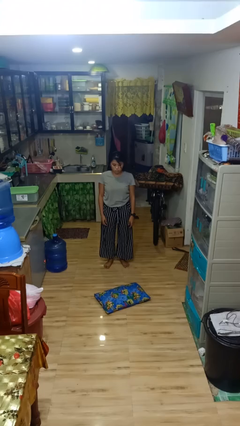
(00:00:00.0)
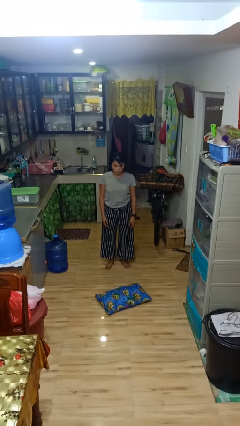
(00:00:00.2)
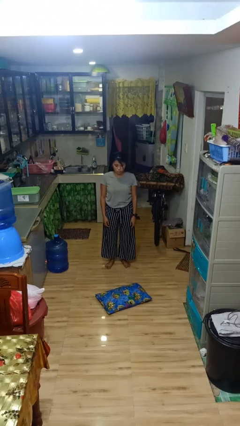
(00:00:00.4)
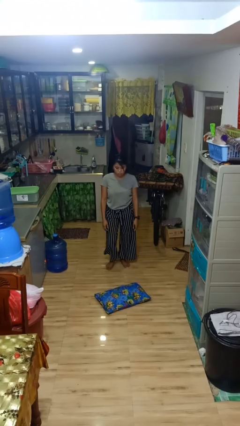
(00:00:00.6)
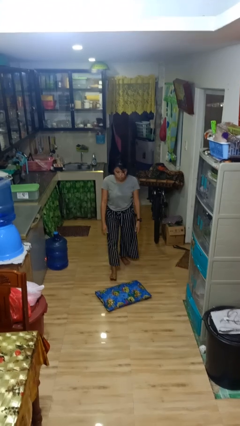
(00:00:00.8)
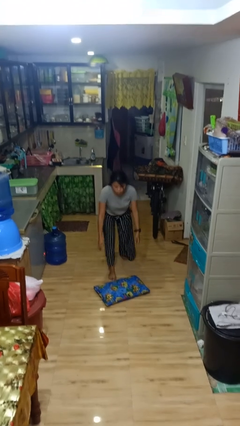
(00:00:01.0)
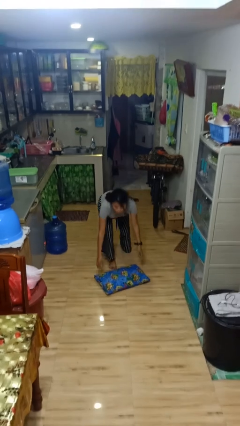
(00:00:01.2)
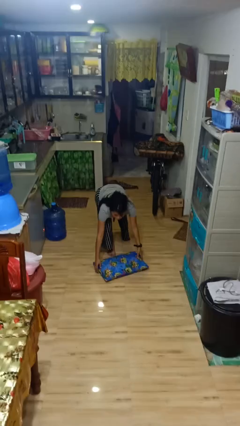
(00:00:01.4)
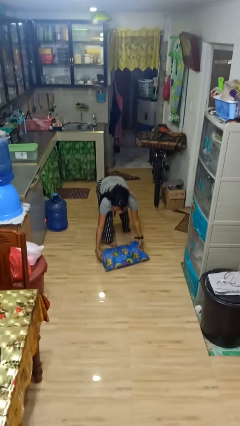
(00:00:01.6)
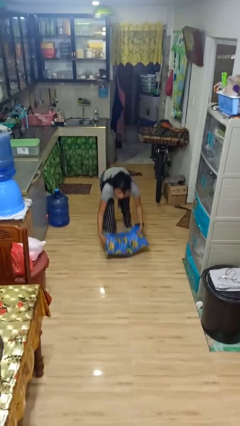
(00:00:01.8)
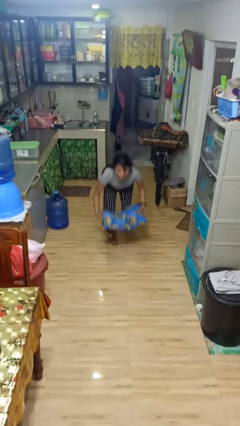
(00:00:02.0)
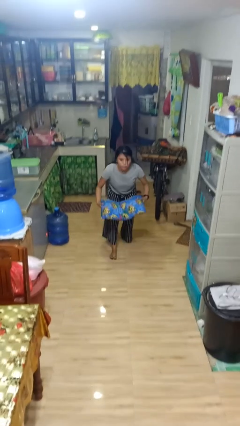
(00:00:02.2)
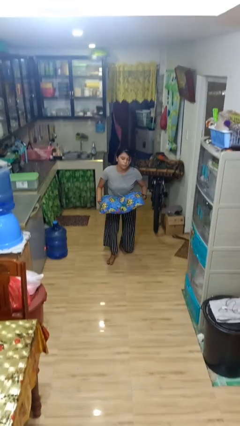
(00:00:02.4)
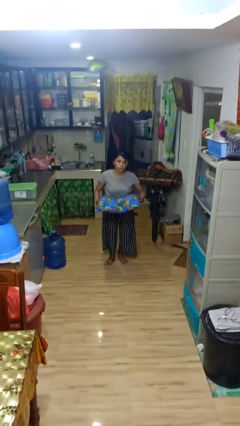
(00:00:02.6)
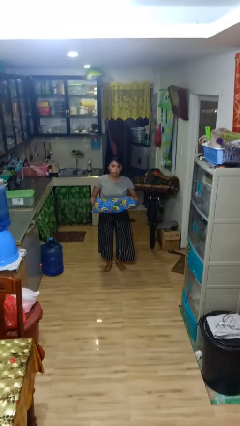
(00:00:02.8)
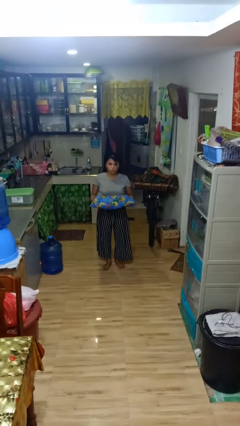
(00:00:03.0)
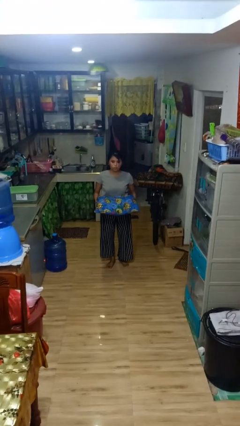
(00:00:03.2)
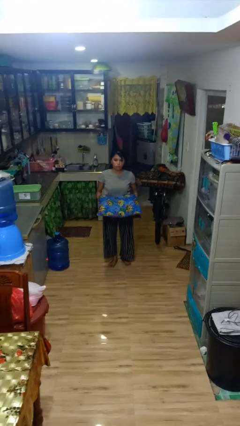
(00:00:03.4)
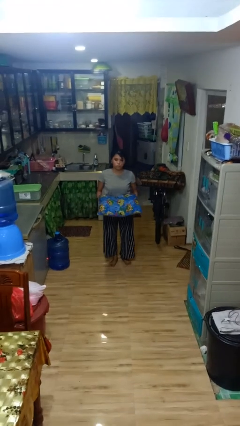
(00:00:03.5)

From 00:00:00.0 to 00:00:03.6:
person picks up object from floor

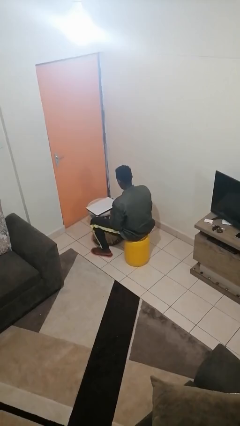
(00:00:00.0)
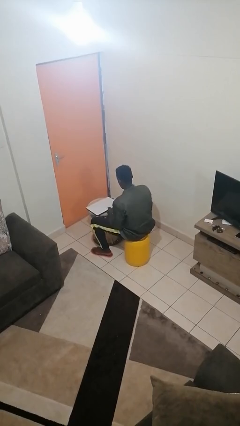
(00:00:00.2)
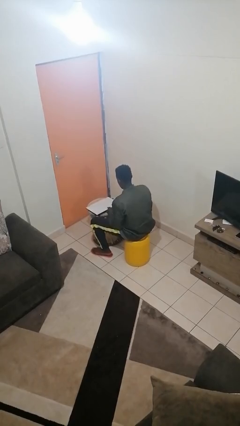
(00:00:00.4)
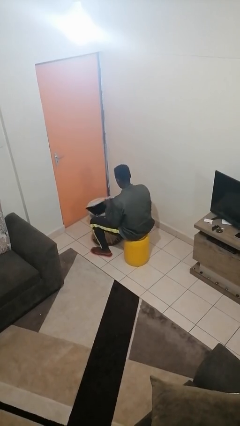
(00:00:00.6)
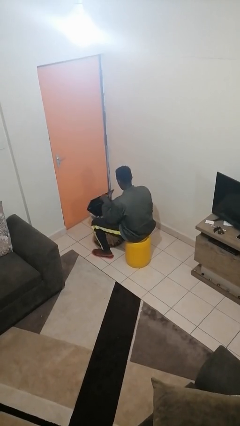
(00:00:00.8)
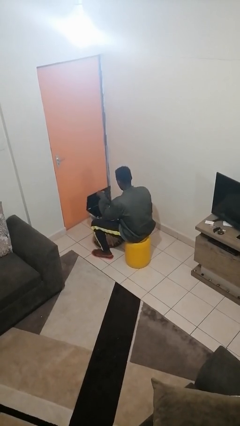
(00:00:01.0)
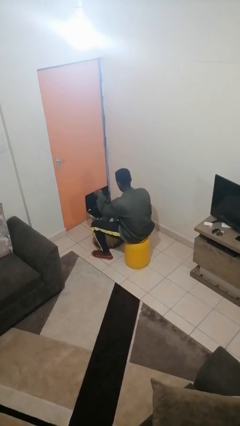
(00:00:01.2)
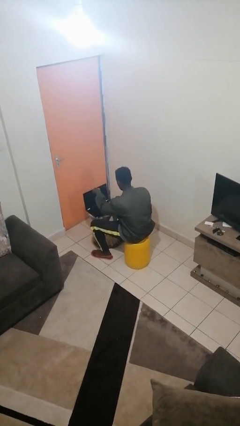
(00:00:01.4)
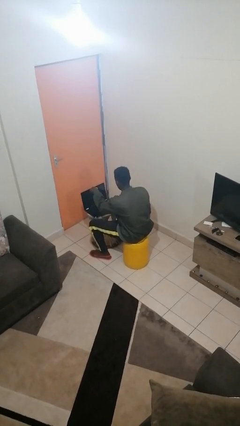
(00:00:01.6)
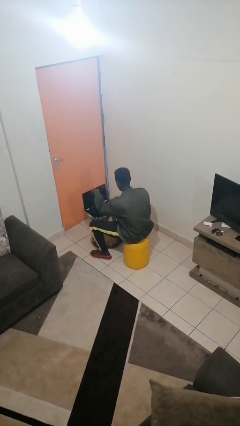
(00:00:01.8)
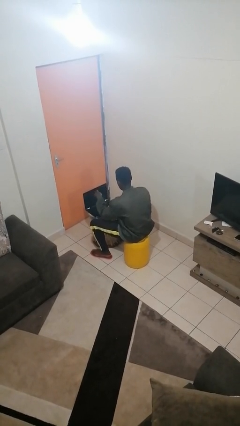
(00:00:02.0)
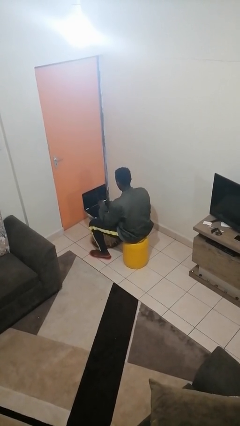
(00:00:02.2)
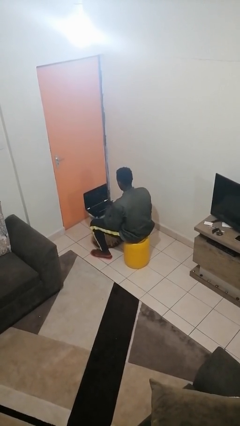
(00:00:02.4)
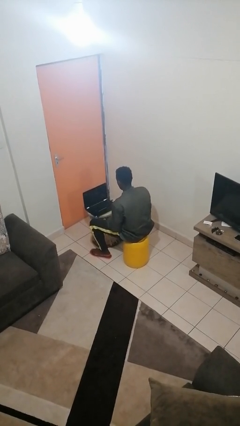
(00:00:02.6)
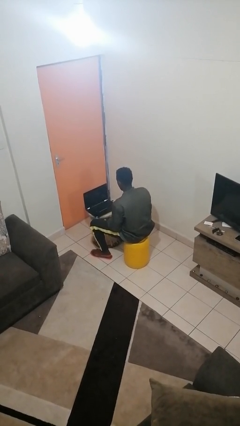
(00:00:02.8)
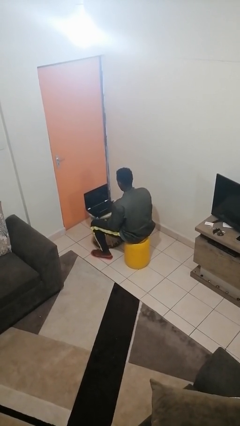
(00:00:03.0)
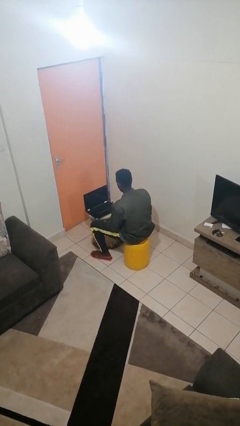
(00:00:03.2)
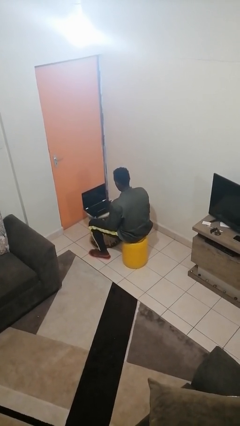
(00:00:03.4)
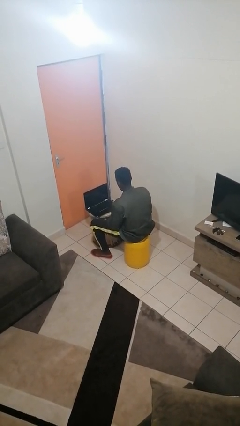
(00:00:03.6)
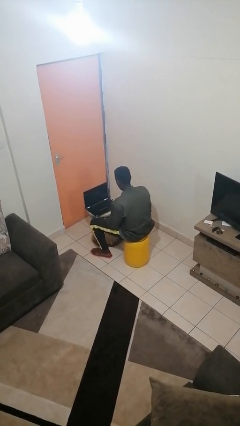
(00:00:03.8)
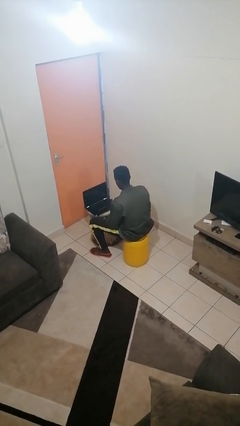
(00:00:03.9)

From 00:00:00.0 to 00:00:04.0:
person opens laptop

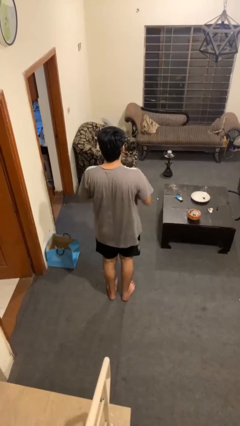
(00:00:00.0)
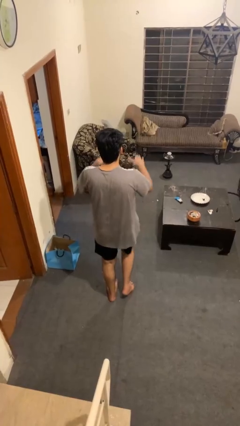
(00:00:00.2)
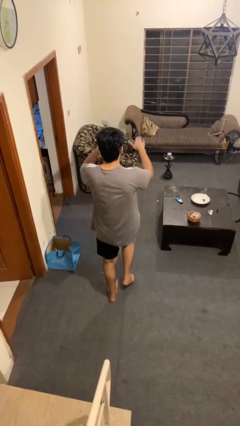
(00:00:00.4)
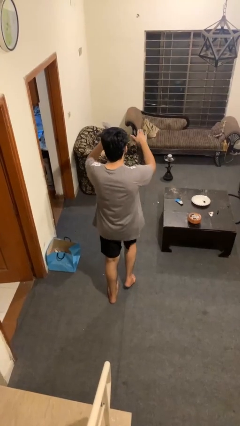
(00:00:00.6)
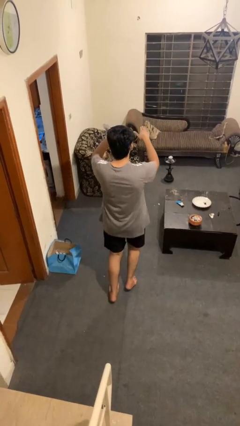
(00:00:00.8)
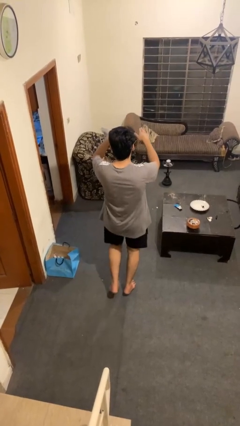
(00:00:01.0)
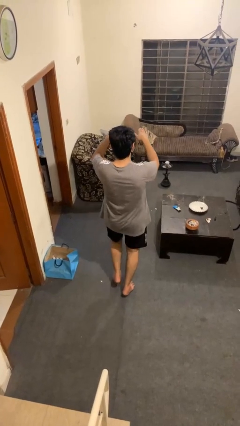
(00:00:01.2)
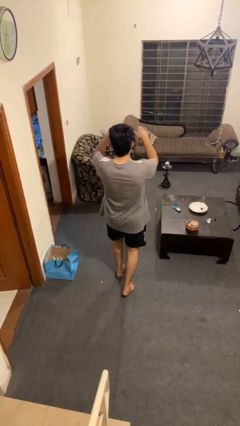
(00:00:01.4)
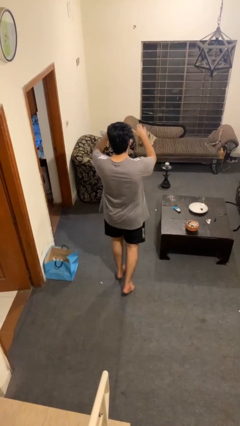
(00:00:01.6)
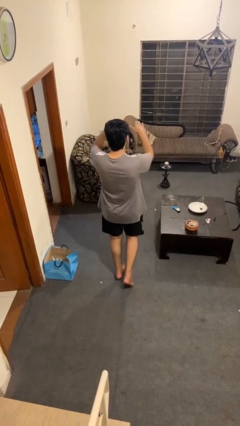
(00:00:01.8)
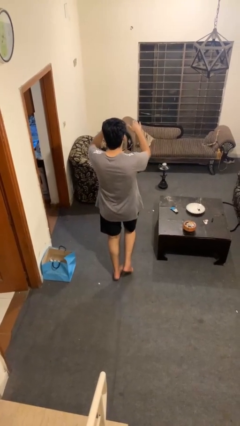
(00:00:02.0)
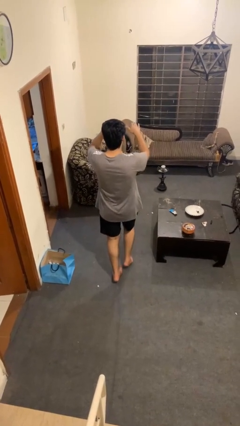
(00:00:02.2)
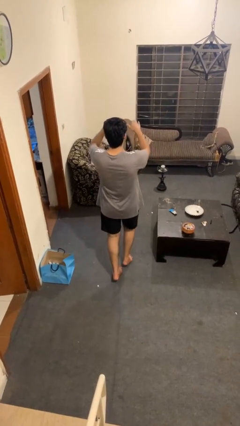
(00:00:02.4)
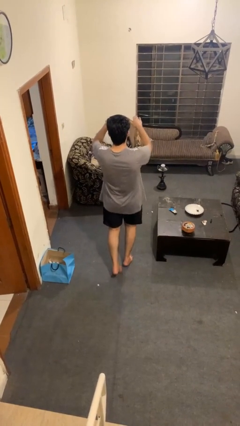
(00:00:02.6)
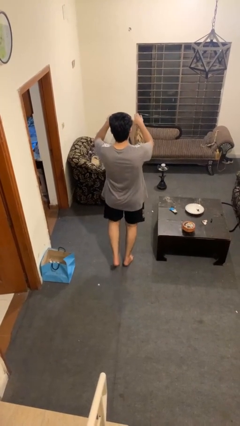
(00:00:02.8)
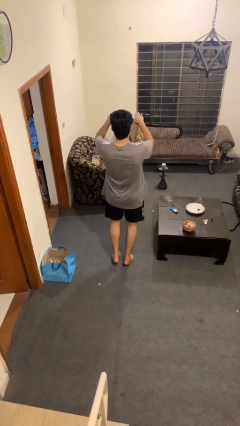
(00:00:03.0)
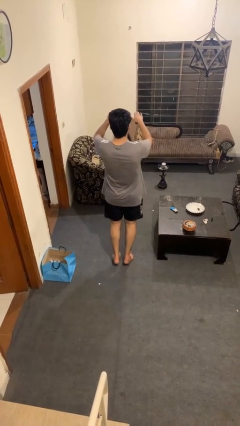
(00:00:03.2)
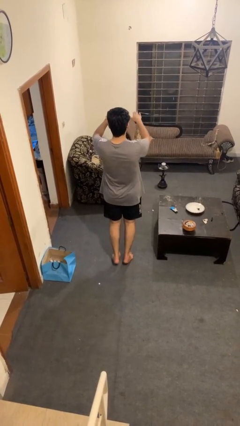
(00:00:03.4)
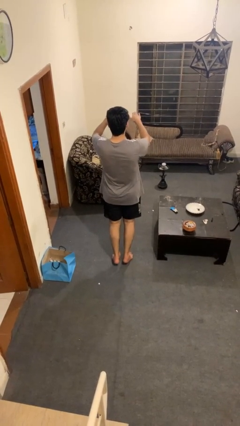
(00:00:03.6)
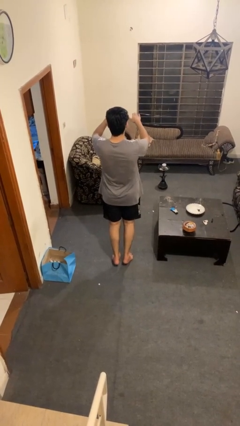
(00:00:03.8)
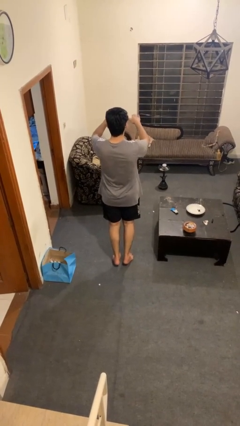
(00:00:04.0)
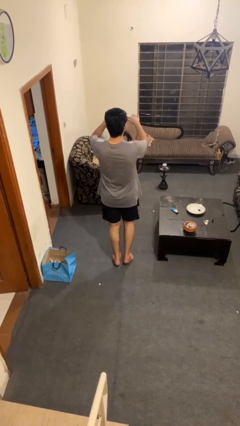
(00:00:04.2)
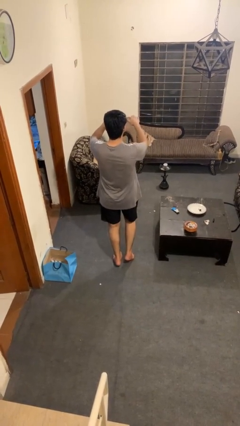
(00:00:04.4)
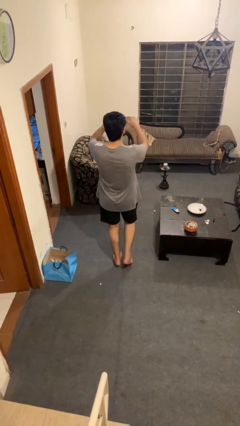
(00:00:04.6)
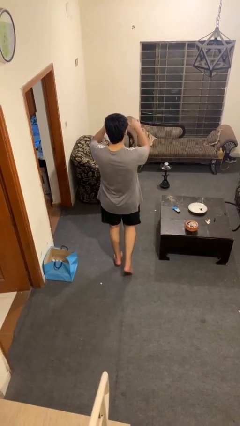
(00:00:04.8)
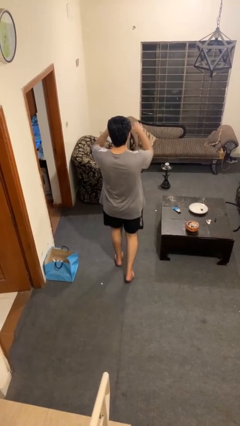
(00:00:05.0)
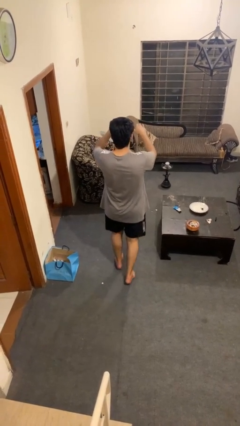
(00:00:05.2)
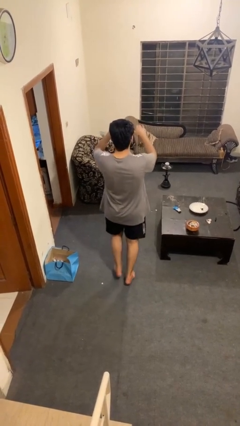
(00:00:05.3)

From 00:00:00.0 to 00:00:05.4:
person walks tiptoe

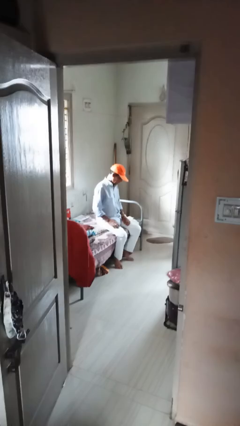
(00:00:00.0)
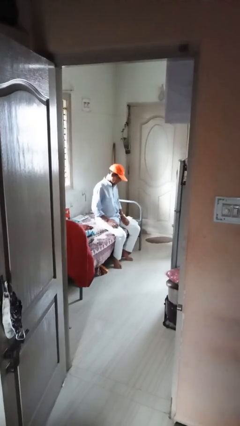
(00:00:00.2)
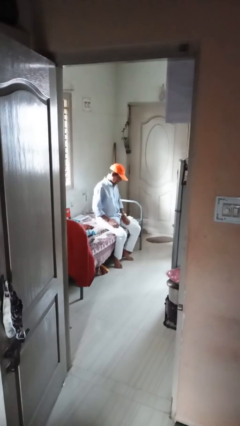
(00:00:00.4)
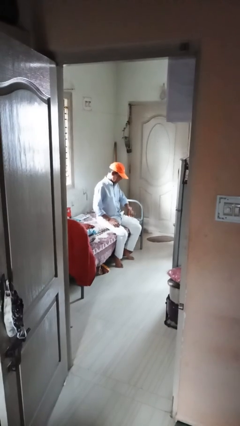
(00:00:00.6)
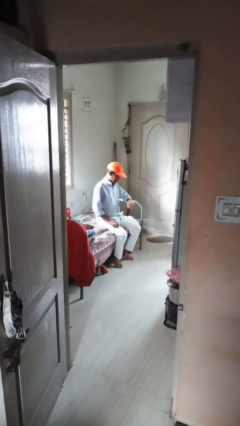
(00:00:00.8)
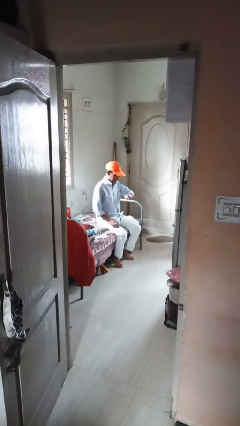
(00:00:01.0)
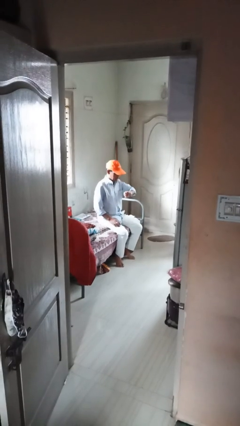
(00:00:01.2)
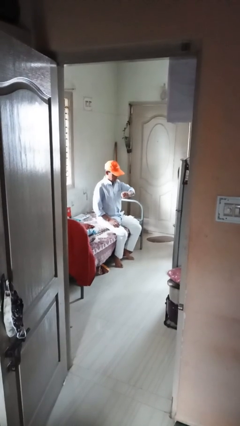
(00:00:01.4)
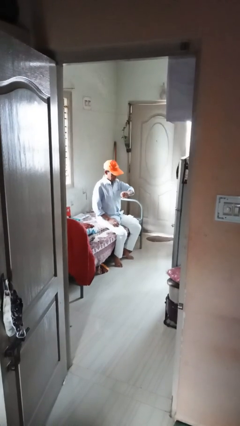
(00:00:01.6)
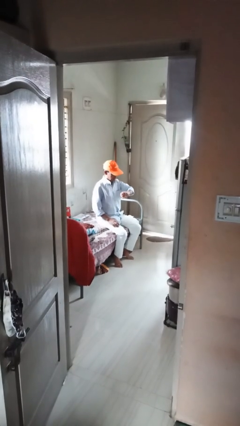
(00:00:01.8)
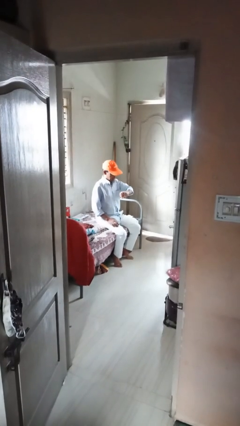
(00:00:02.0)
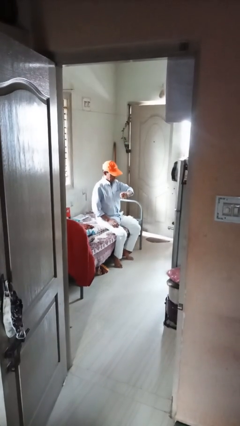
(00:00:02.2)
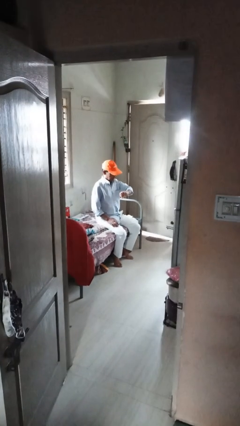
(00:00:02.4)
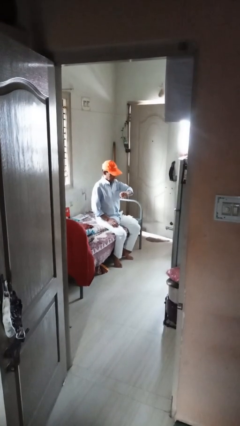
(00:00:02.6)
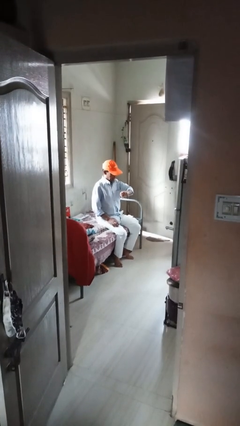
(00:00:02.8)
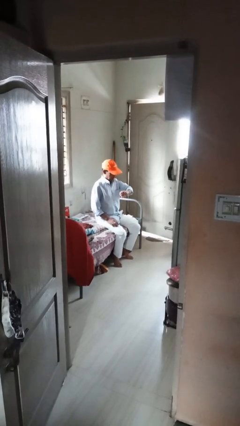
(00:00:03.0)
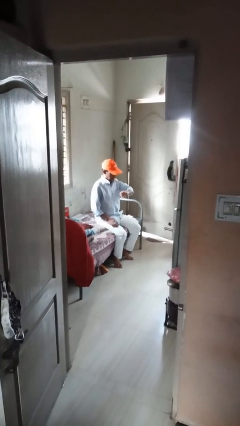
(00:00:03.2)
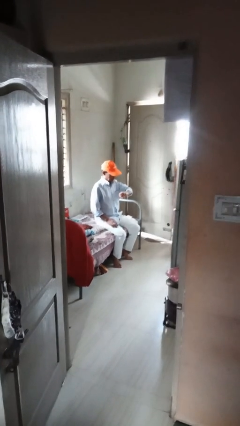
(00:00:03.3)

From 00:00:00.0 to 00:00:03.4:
person looks at wristwatch

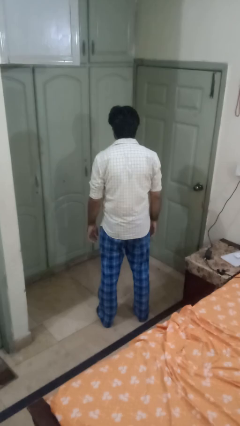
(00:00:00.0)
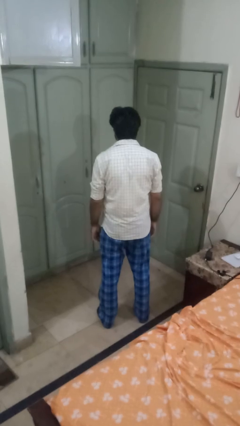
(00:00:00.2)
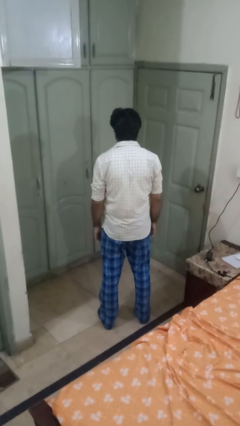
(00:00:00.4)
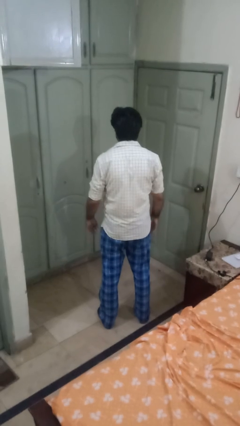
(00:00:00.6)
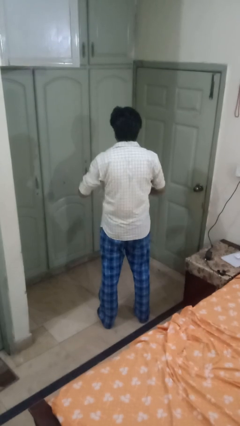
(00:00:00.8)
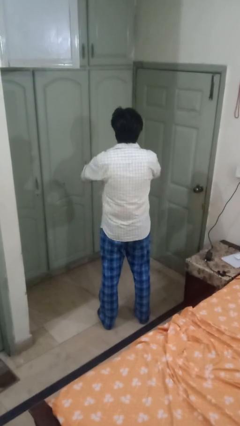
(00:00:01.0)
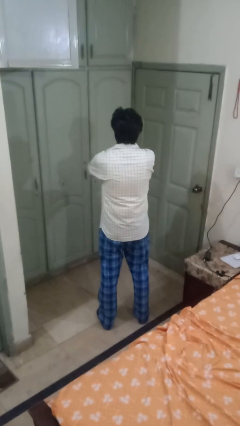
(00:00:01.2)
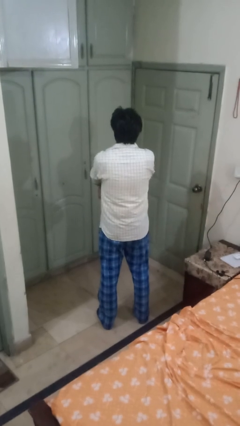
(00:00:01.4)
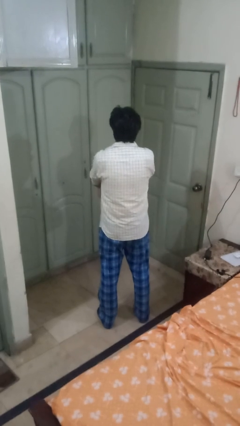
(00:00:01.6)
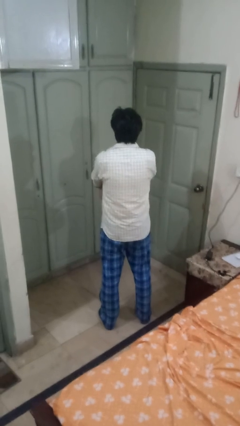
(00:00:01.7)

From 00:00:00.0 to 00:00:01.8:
person crosses arms
